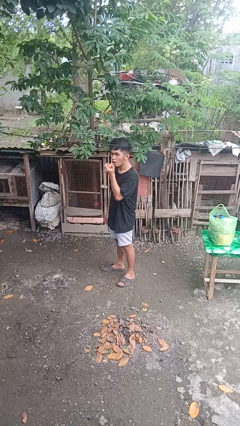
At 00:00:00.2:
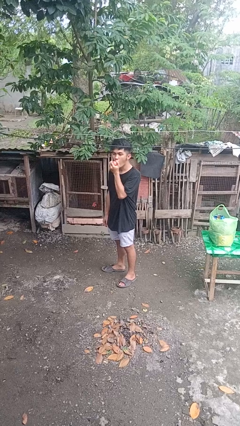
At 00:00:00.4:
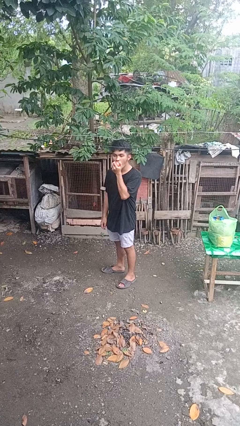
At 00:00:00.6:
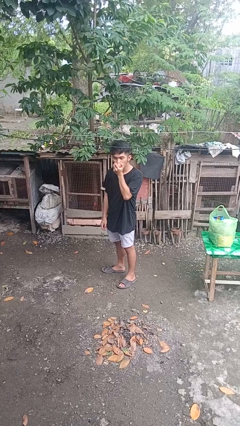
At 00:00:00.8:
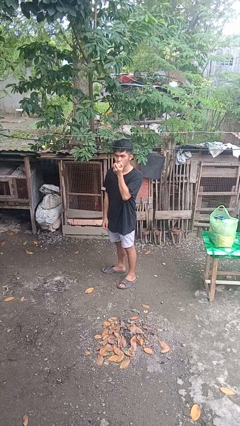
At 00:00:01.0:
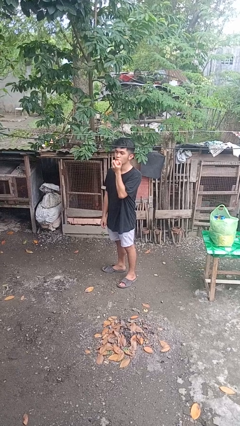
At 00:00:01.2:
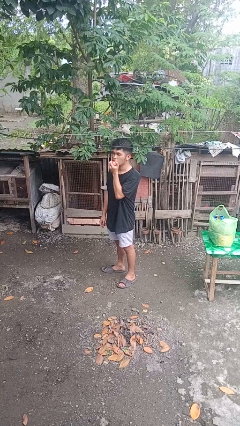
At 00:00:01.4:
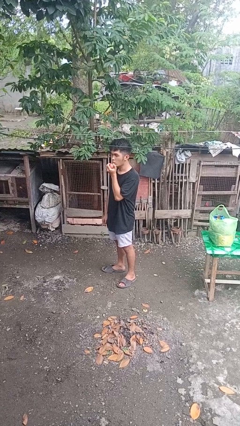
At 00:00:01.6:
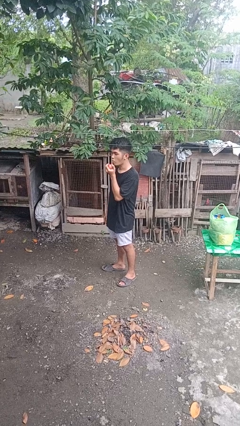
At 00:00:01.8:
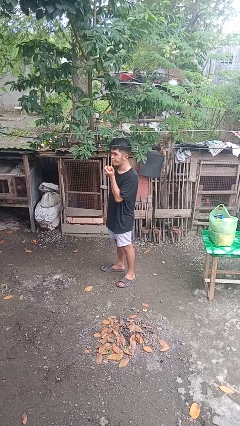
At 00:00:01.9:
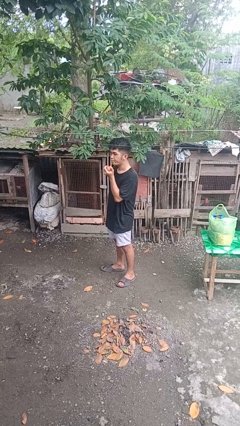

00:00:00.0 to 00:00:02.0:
person eats apple

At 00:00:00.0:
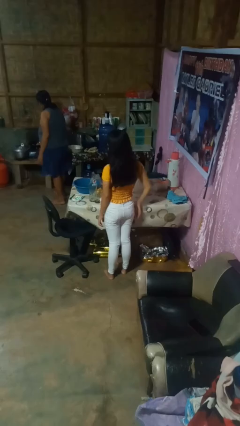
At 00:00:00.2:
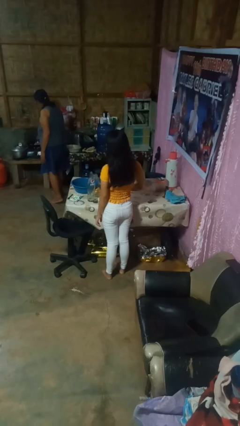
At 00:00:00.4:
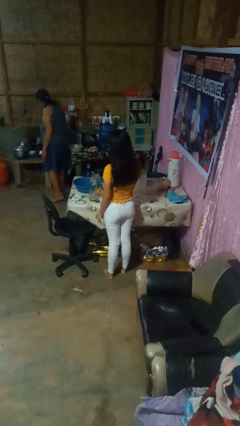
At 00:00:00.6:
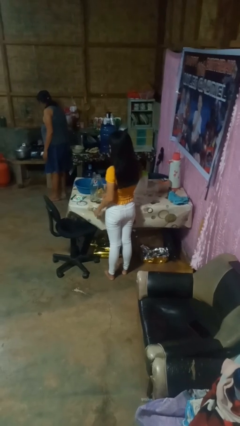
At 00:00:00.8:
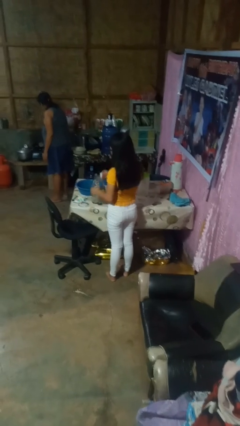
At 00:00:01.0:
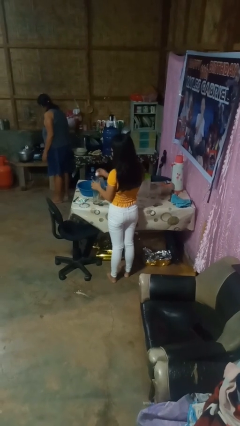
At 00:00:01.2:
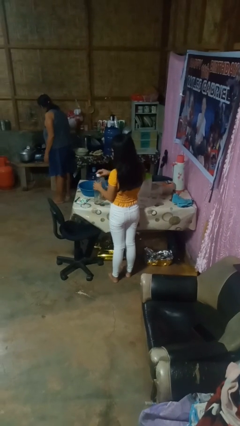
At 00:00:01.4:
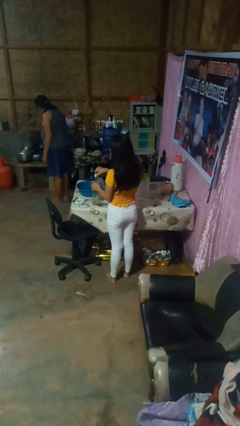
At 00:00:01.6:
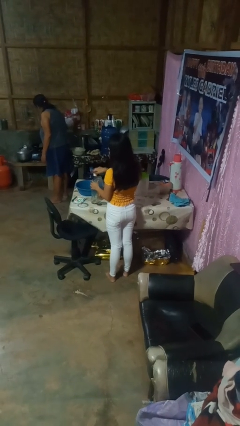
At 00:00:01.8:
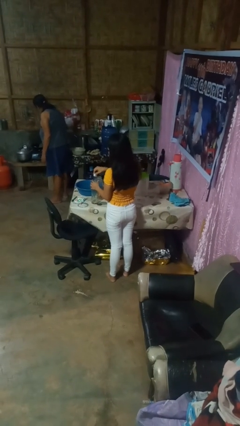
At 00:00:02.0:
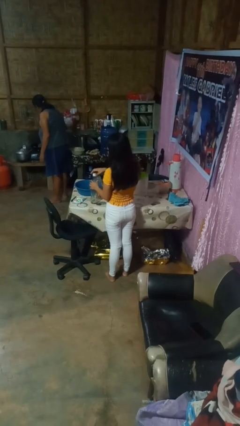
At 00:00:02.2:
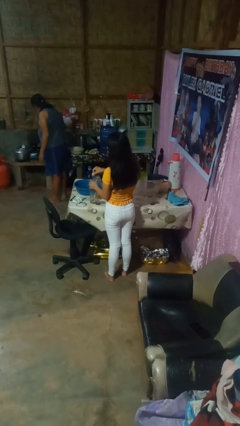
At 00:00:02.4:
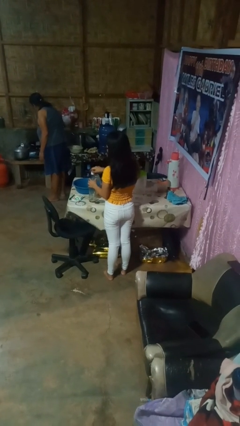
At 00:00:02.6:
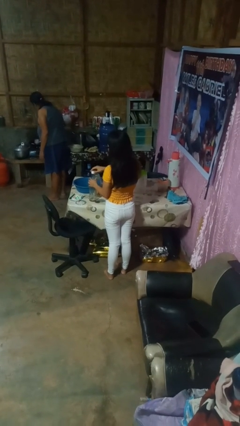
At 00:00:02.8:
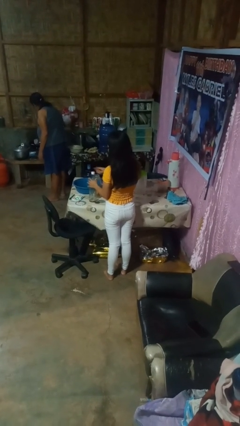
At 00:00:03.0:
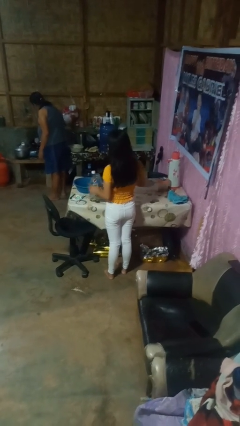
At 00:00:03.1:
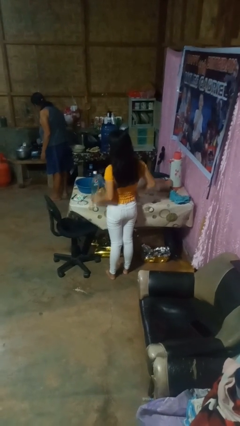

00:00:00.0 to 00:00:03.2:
person screws lid to bottle

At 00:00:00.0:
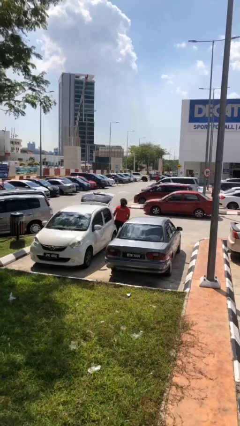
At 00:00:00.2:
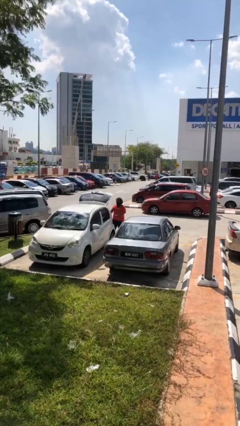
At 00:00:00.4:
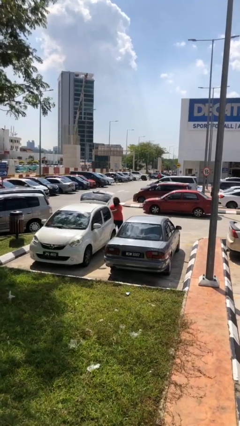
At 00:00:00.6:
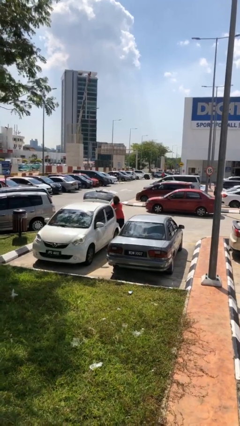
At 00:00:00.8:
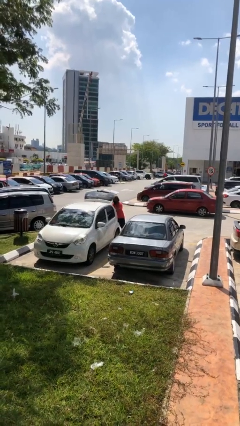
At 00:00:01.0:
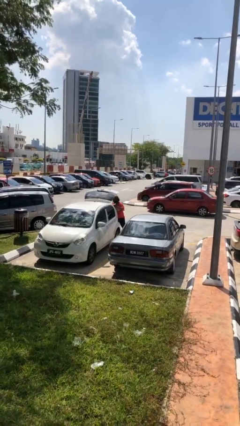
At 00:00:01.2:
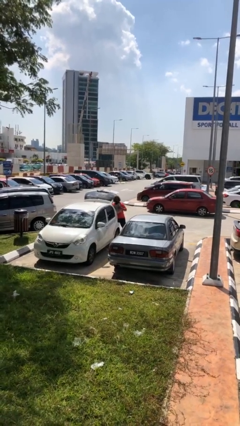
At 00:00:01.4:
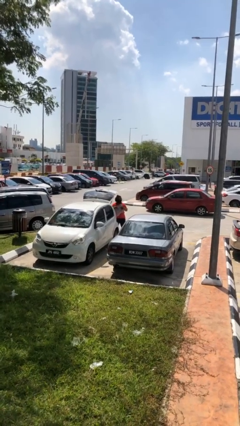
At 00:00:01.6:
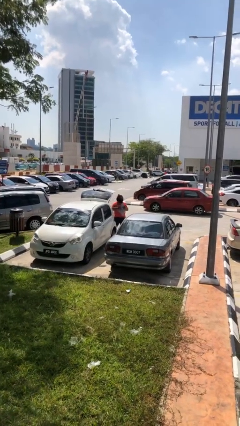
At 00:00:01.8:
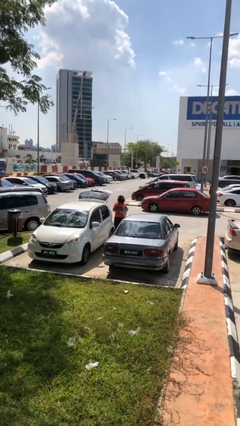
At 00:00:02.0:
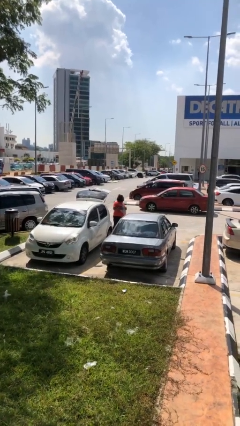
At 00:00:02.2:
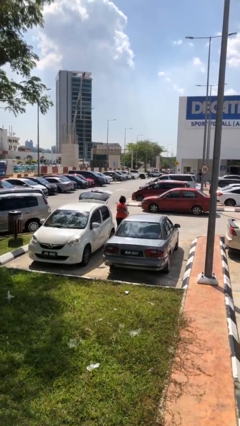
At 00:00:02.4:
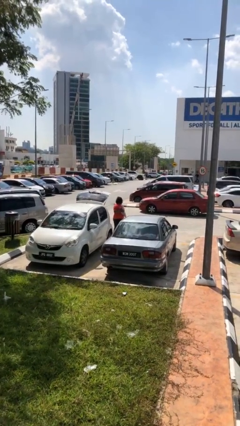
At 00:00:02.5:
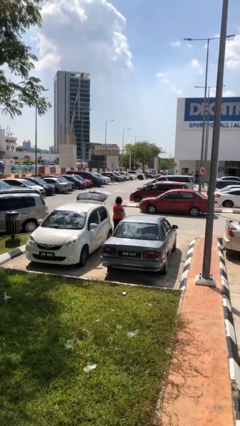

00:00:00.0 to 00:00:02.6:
person unloads car

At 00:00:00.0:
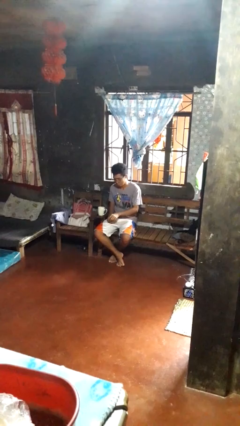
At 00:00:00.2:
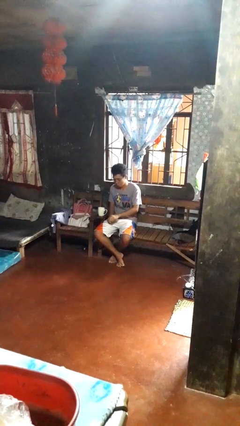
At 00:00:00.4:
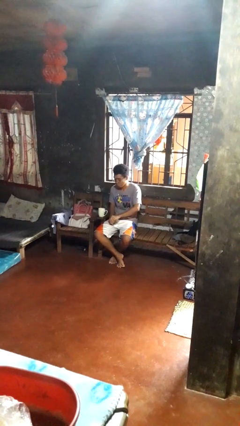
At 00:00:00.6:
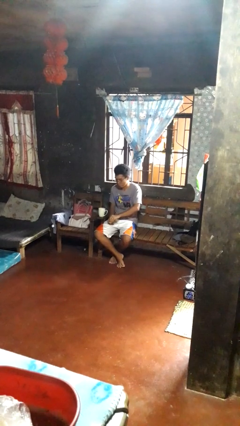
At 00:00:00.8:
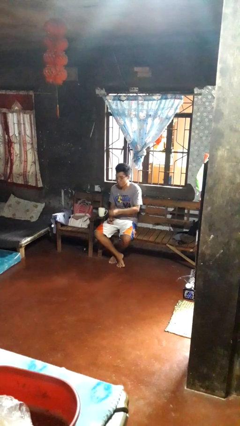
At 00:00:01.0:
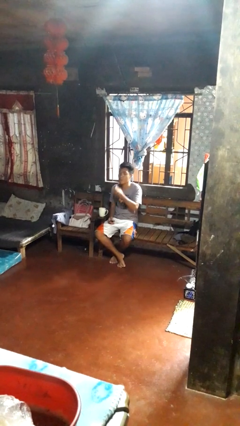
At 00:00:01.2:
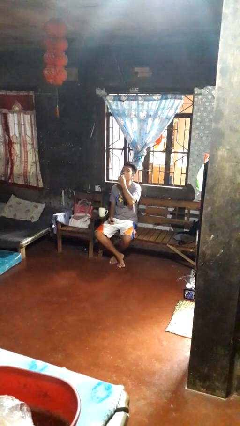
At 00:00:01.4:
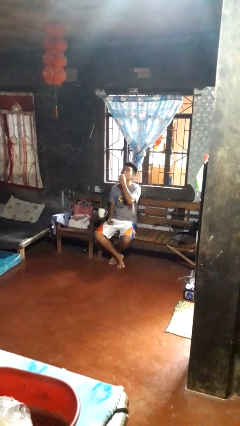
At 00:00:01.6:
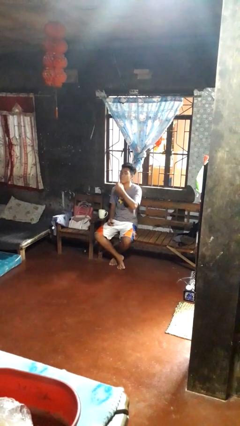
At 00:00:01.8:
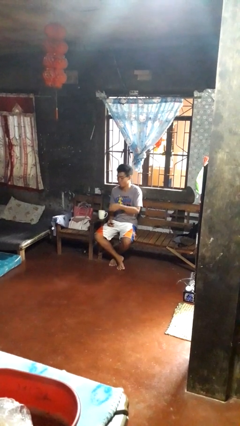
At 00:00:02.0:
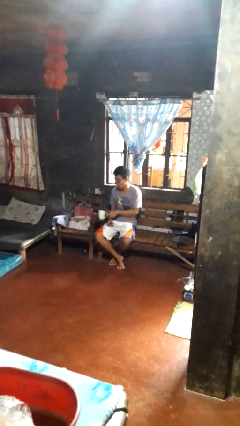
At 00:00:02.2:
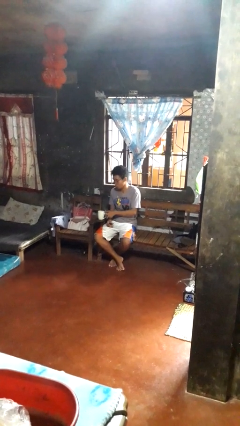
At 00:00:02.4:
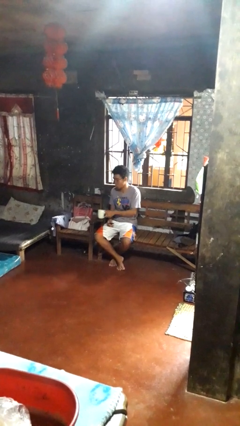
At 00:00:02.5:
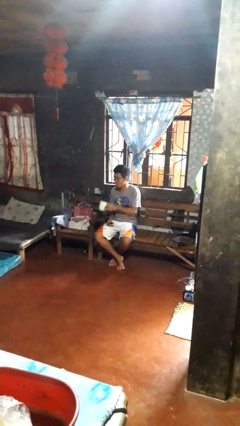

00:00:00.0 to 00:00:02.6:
person takes medicine pills

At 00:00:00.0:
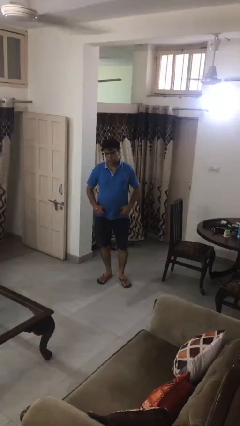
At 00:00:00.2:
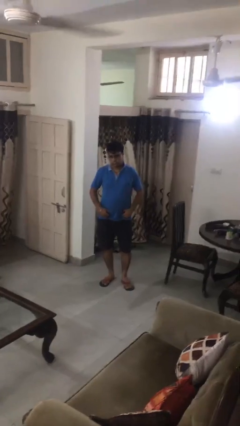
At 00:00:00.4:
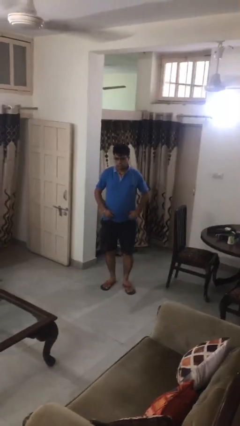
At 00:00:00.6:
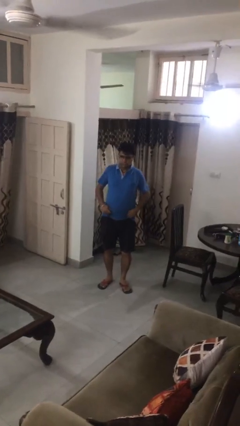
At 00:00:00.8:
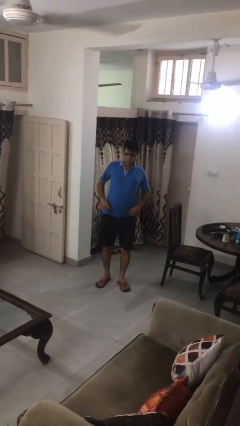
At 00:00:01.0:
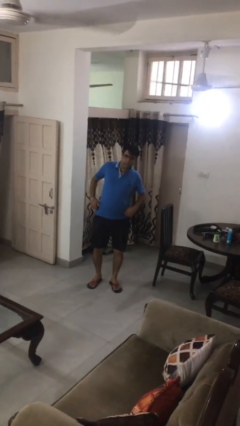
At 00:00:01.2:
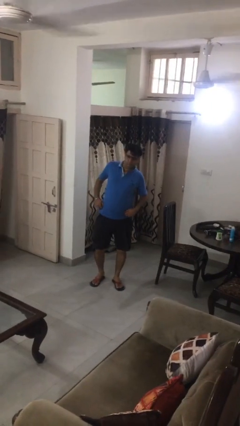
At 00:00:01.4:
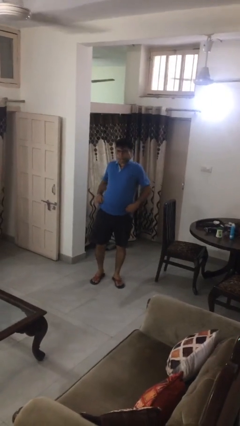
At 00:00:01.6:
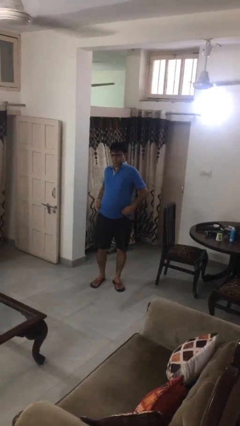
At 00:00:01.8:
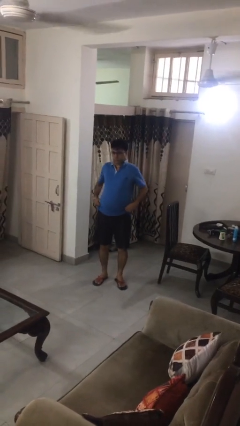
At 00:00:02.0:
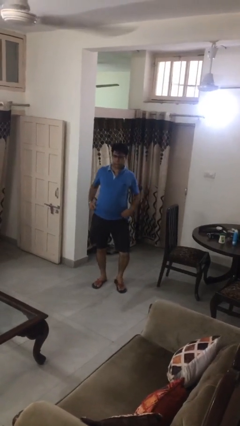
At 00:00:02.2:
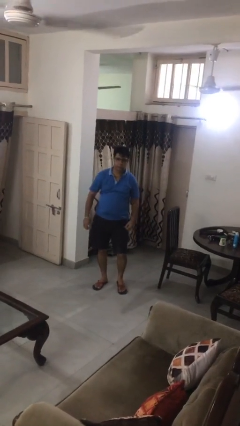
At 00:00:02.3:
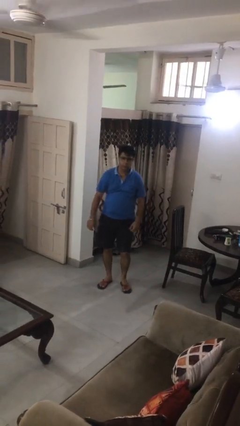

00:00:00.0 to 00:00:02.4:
person hikes up pants

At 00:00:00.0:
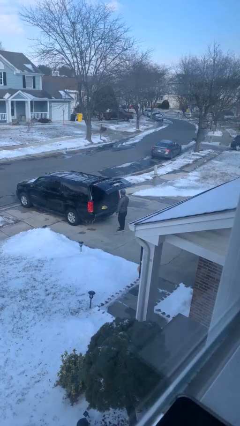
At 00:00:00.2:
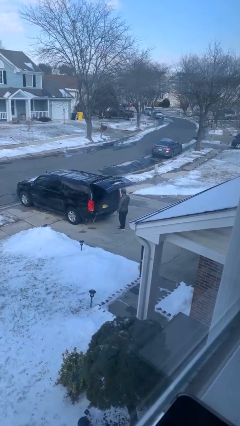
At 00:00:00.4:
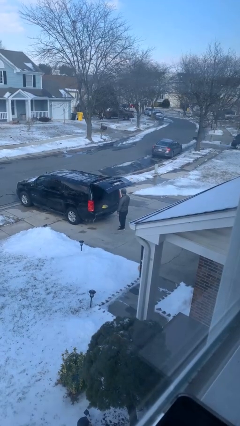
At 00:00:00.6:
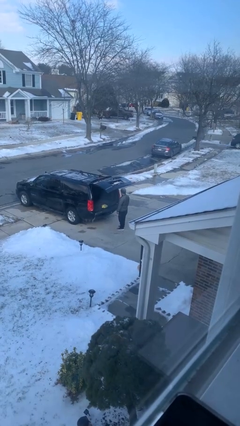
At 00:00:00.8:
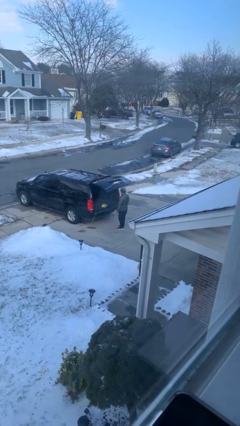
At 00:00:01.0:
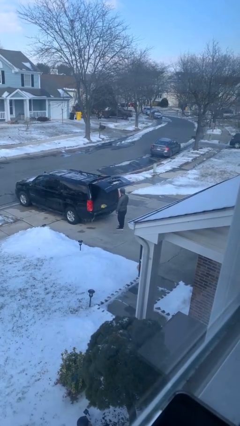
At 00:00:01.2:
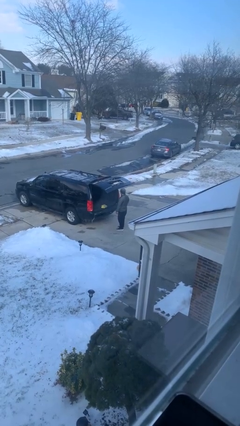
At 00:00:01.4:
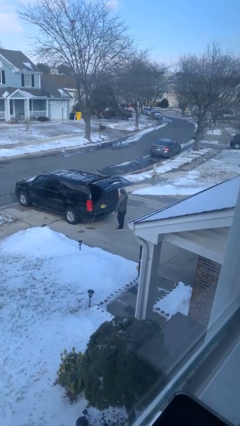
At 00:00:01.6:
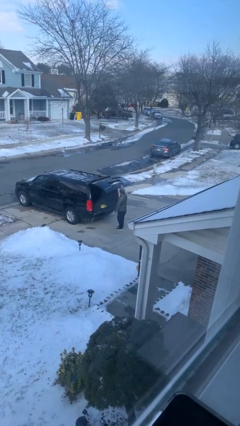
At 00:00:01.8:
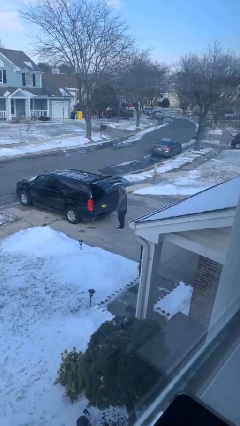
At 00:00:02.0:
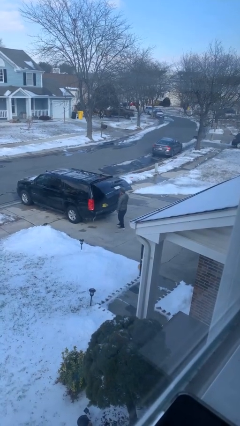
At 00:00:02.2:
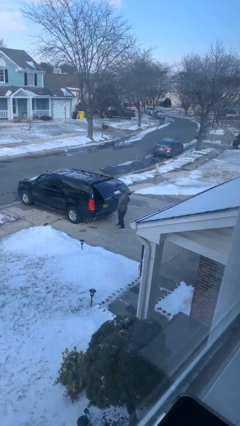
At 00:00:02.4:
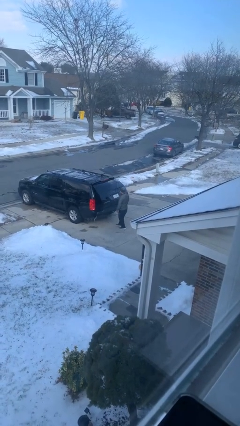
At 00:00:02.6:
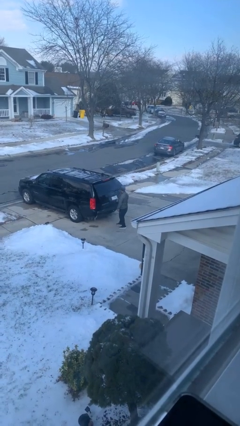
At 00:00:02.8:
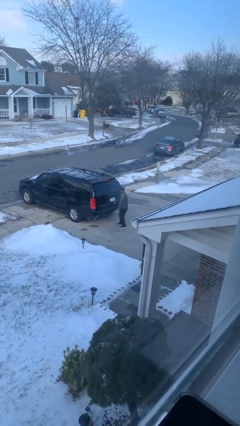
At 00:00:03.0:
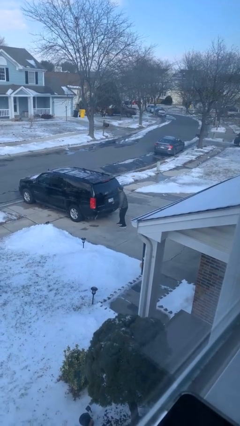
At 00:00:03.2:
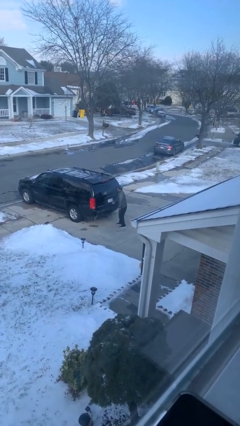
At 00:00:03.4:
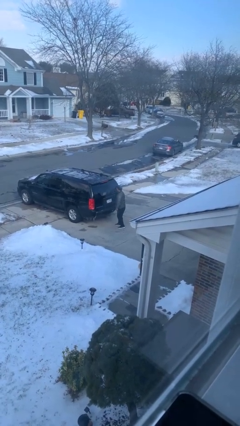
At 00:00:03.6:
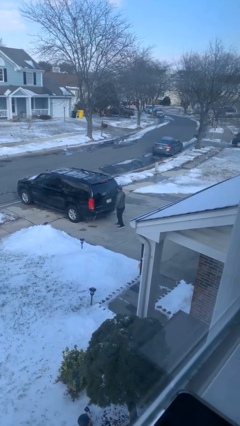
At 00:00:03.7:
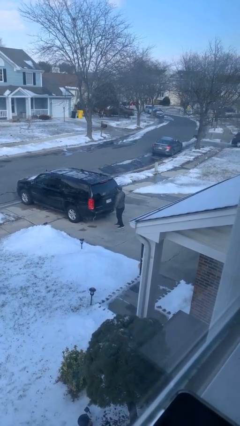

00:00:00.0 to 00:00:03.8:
person closes car trunk

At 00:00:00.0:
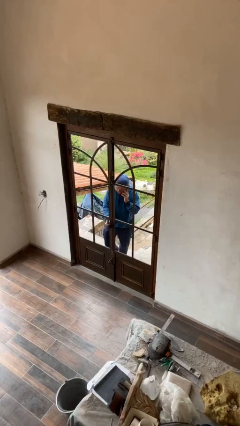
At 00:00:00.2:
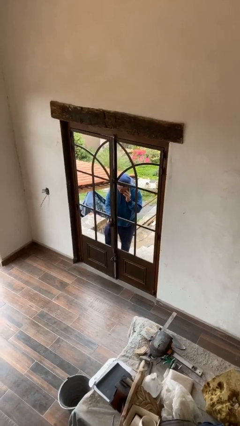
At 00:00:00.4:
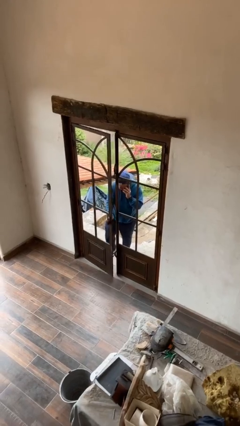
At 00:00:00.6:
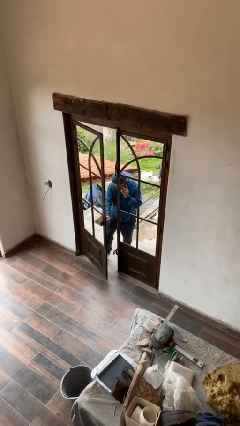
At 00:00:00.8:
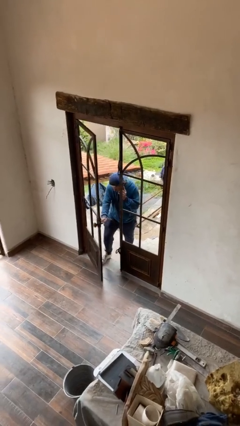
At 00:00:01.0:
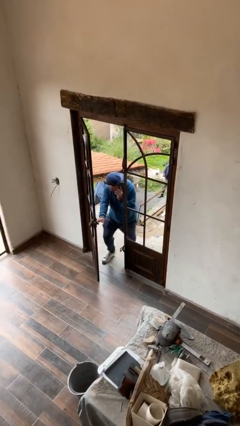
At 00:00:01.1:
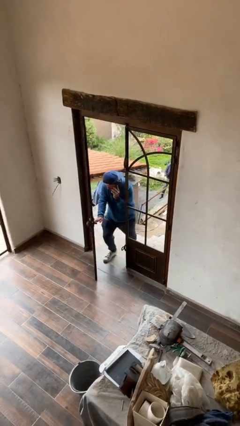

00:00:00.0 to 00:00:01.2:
person opens facility door
